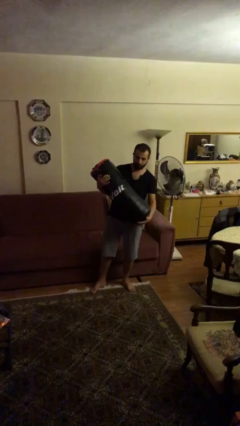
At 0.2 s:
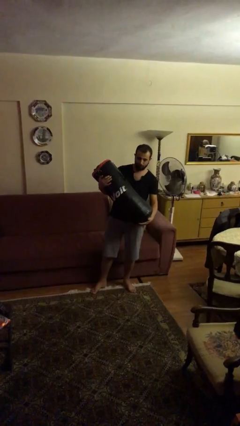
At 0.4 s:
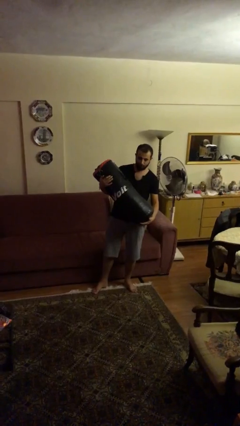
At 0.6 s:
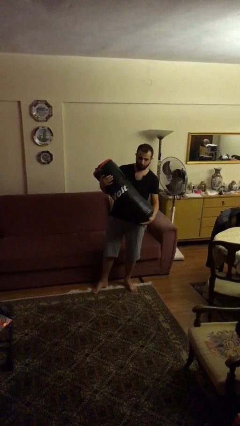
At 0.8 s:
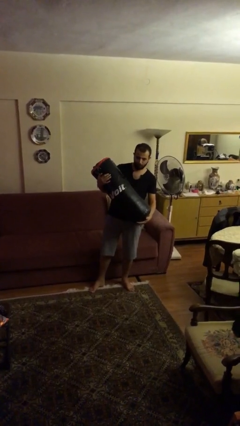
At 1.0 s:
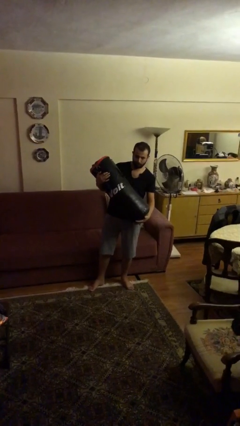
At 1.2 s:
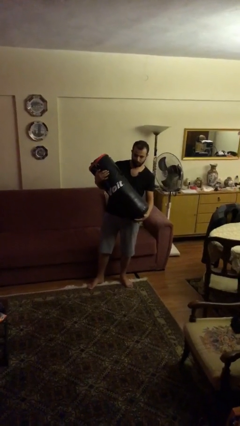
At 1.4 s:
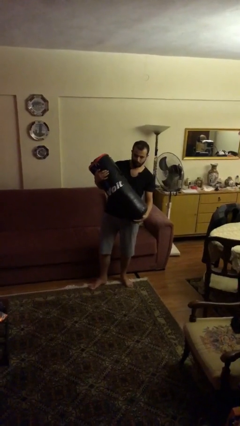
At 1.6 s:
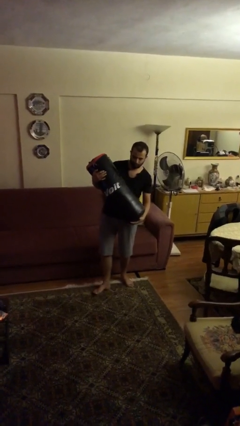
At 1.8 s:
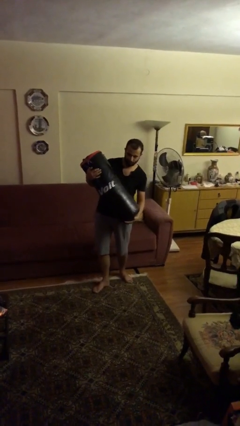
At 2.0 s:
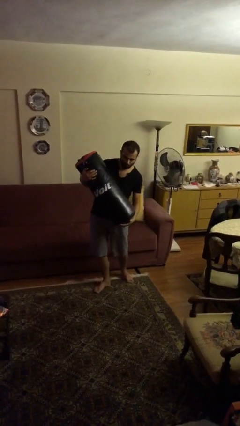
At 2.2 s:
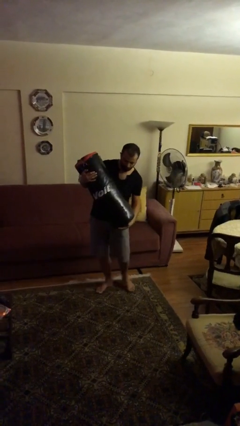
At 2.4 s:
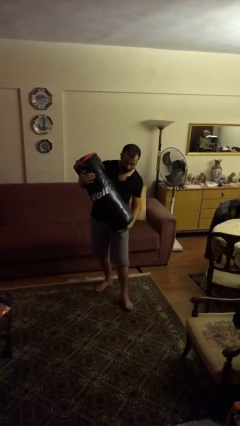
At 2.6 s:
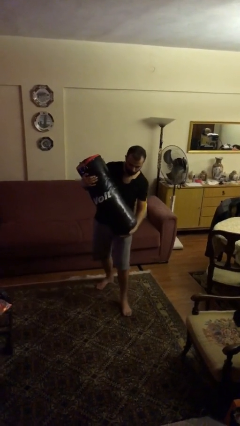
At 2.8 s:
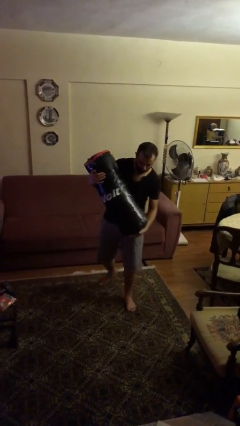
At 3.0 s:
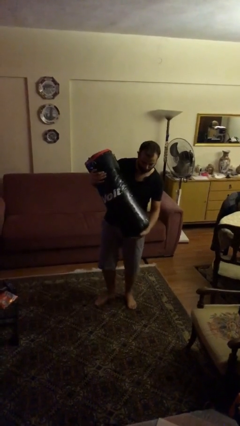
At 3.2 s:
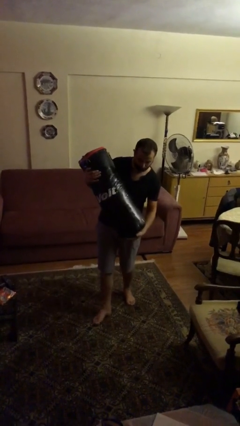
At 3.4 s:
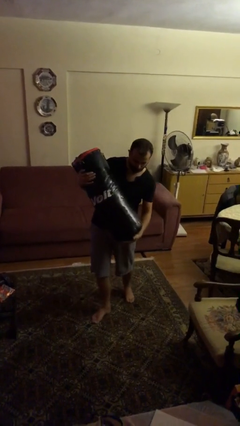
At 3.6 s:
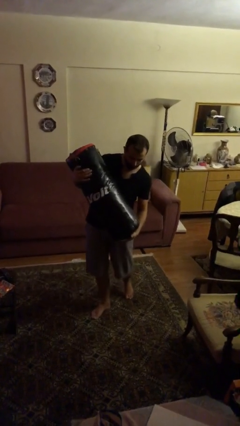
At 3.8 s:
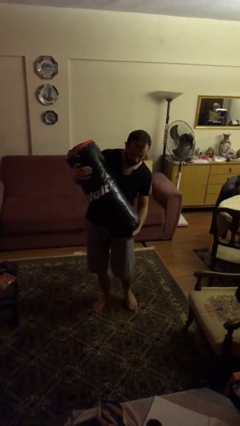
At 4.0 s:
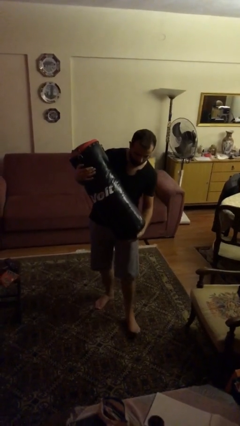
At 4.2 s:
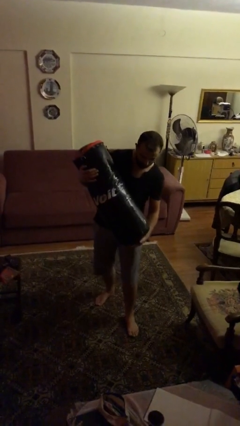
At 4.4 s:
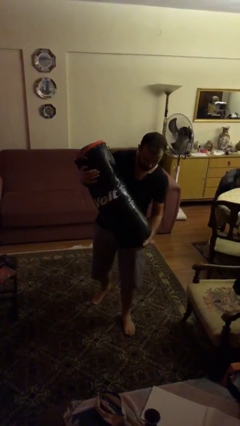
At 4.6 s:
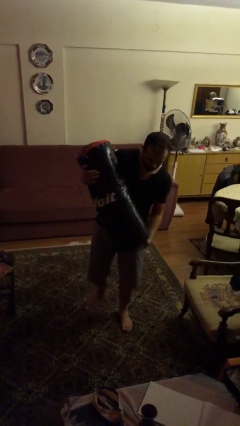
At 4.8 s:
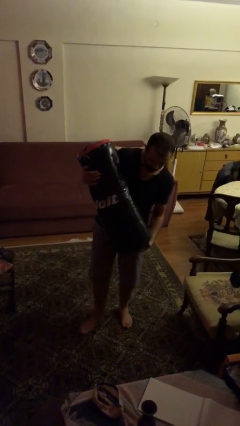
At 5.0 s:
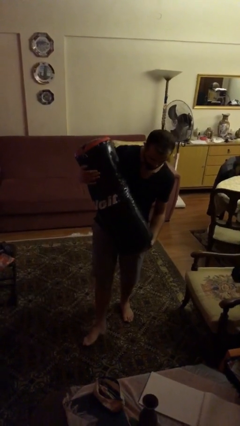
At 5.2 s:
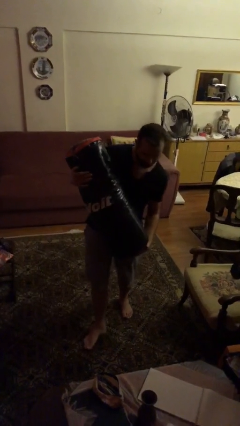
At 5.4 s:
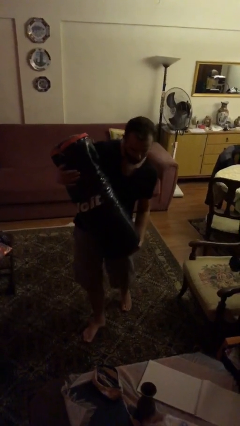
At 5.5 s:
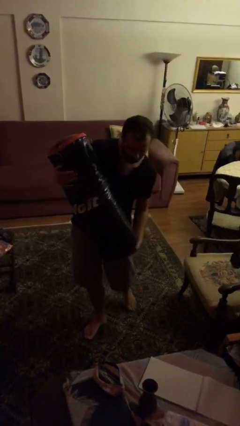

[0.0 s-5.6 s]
person carries heavy object

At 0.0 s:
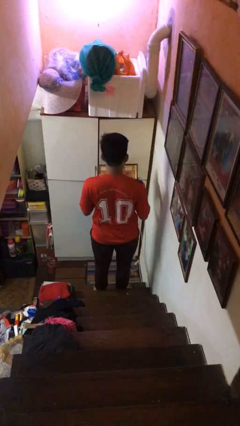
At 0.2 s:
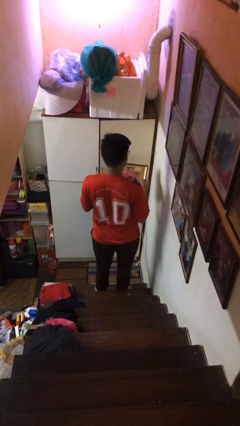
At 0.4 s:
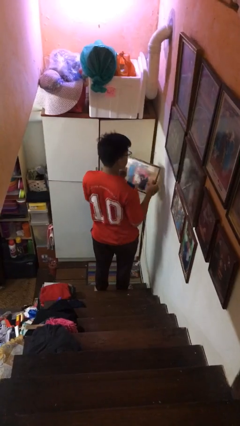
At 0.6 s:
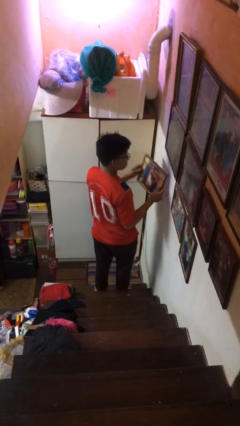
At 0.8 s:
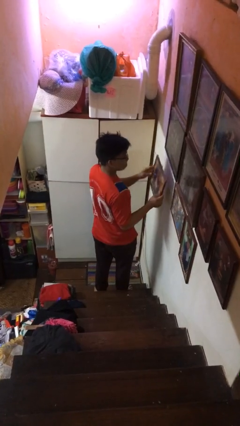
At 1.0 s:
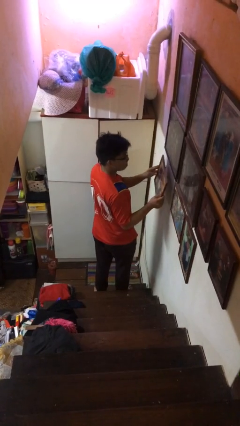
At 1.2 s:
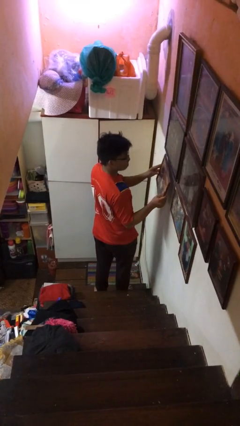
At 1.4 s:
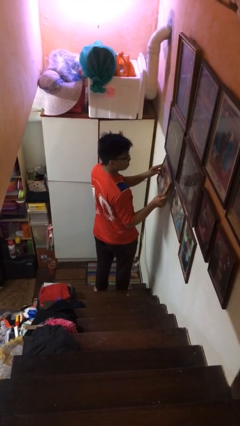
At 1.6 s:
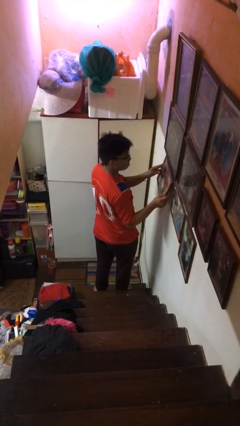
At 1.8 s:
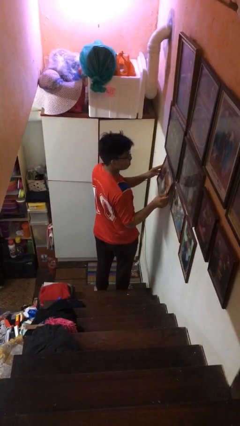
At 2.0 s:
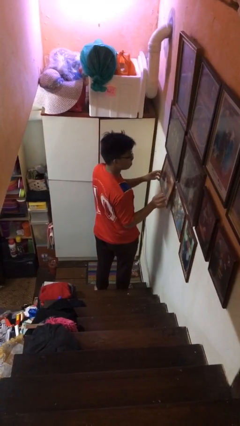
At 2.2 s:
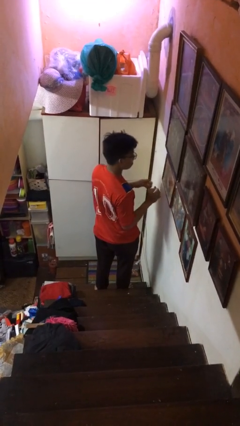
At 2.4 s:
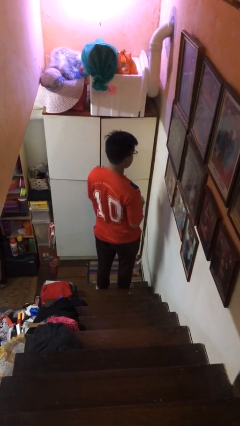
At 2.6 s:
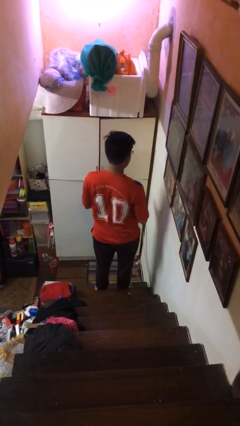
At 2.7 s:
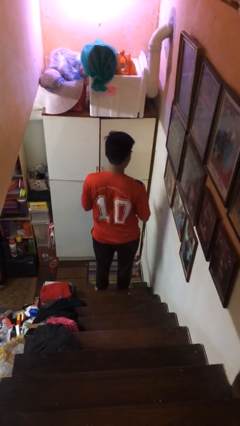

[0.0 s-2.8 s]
person puts up picture frame

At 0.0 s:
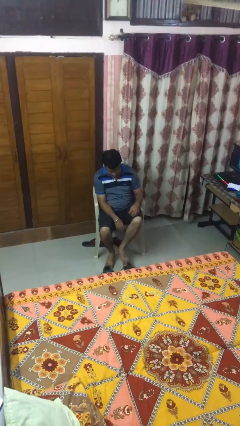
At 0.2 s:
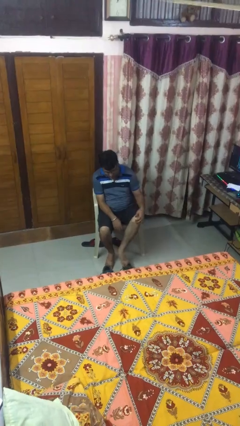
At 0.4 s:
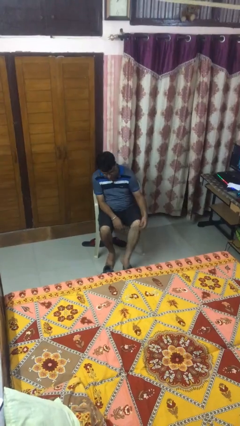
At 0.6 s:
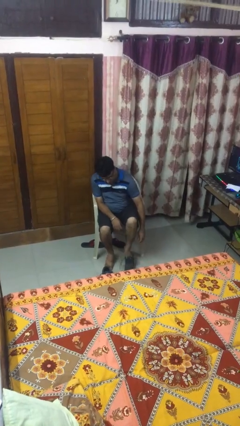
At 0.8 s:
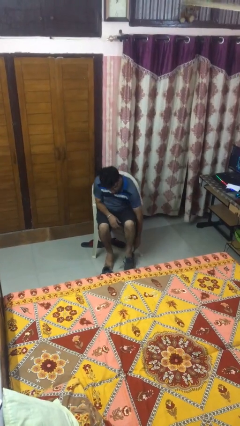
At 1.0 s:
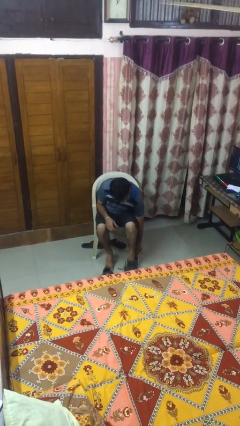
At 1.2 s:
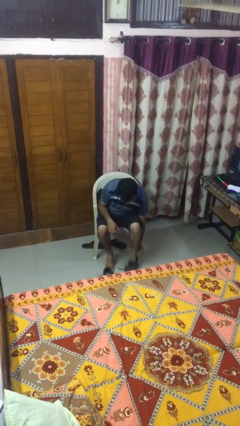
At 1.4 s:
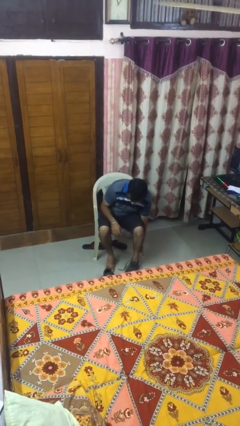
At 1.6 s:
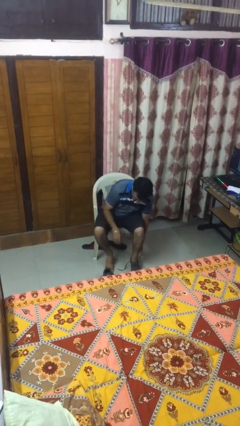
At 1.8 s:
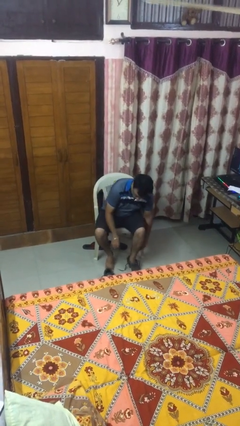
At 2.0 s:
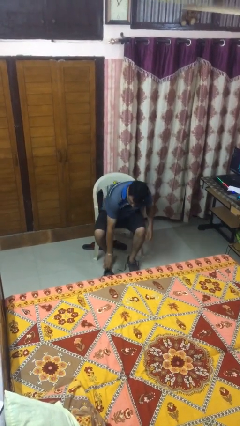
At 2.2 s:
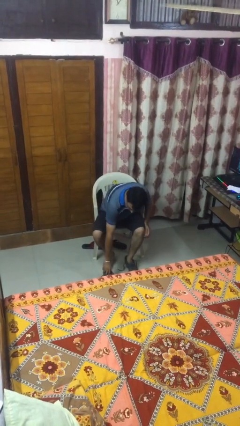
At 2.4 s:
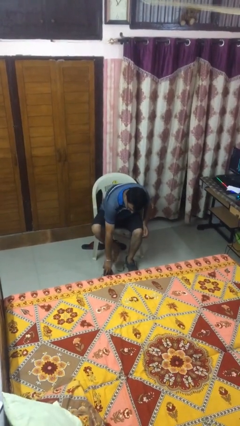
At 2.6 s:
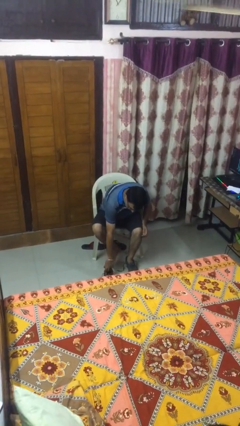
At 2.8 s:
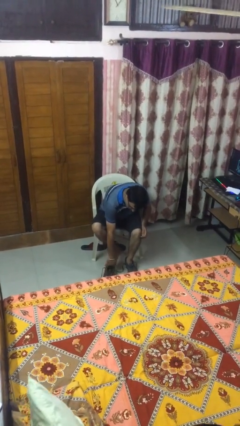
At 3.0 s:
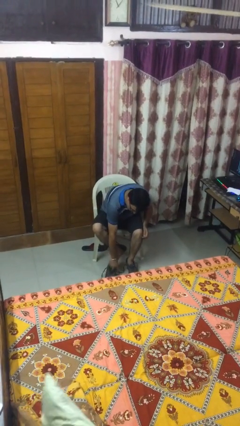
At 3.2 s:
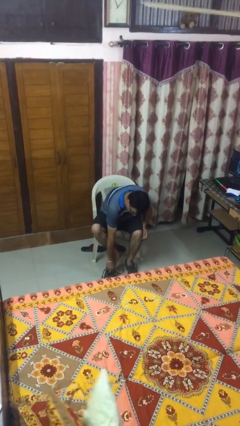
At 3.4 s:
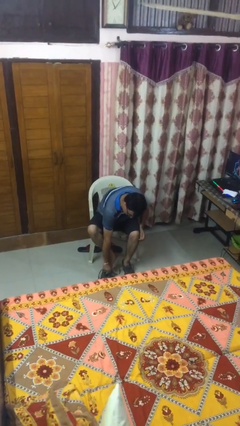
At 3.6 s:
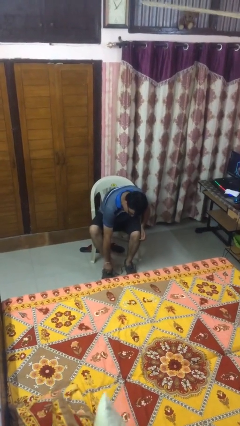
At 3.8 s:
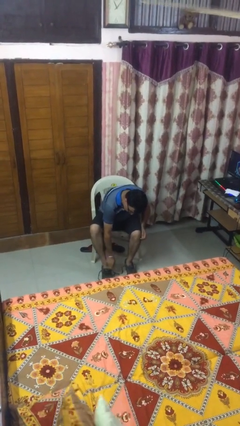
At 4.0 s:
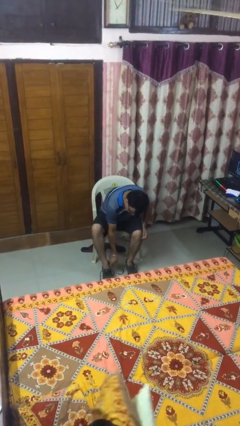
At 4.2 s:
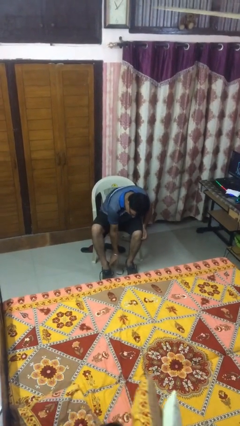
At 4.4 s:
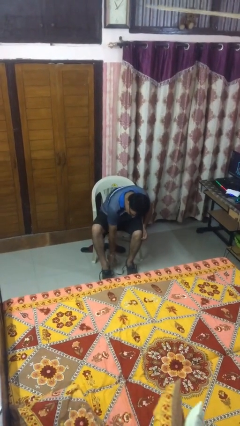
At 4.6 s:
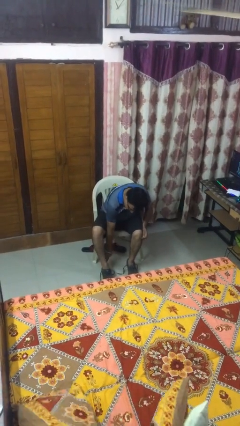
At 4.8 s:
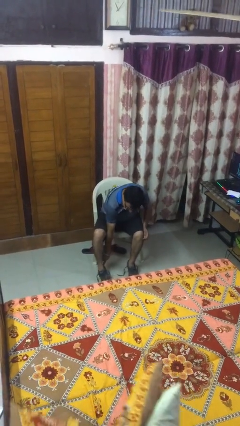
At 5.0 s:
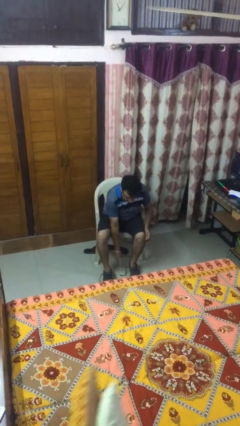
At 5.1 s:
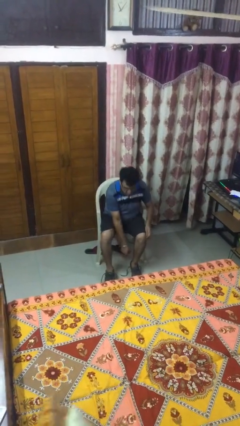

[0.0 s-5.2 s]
person puts on shoes

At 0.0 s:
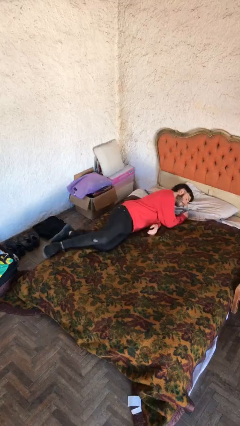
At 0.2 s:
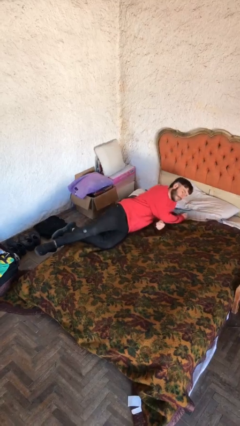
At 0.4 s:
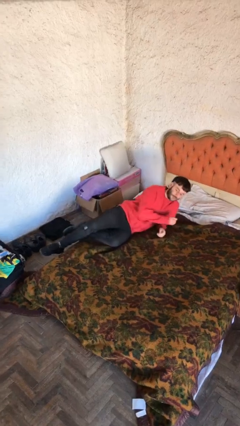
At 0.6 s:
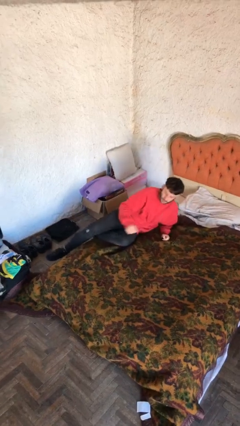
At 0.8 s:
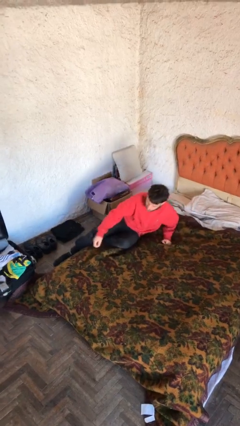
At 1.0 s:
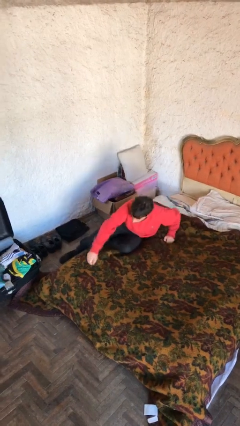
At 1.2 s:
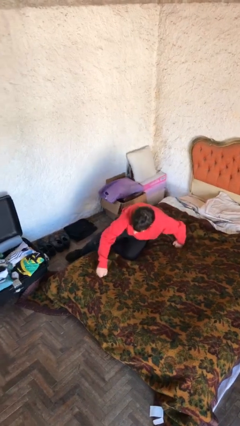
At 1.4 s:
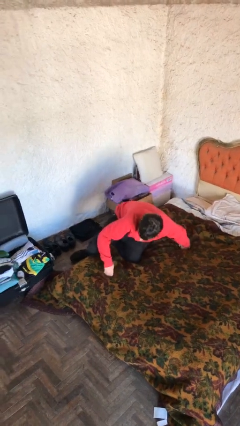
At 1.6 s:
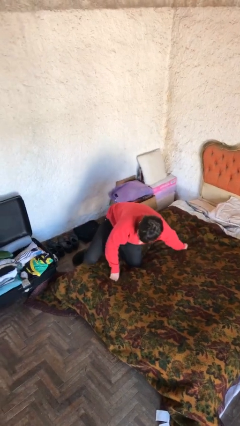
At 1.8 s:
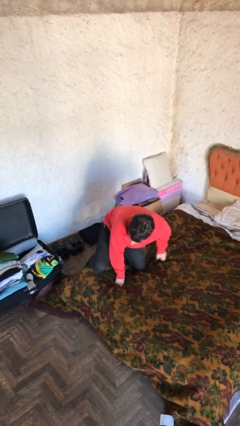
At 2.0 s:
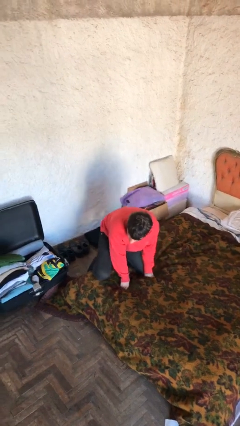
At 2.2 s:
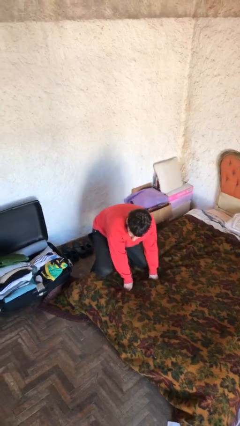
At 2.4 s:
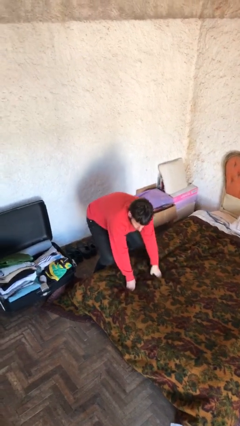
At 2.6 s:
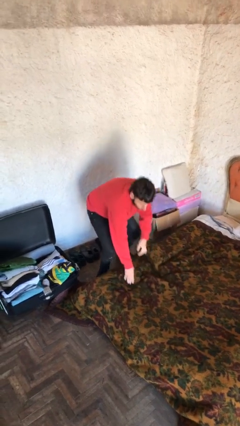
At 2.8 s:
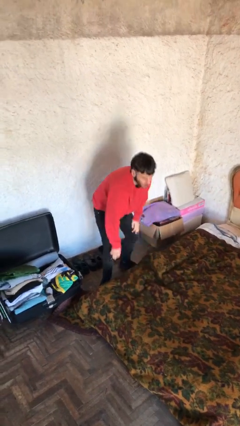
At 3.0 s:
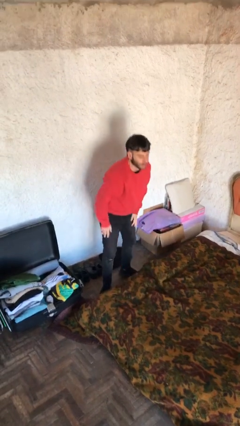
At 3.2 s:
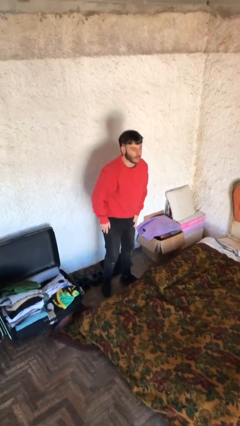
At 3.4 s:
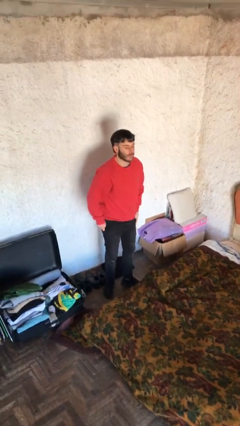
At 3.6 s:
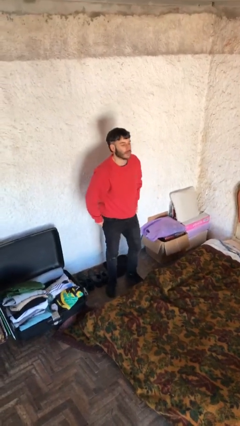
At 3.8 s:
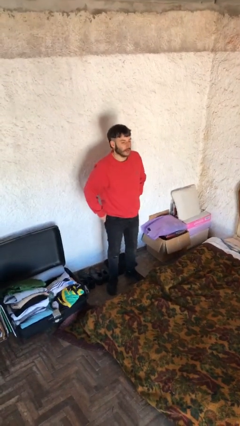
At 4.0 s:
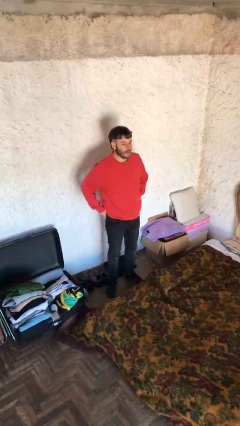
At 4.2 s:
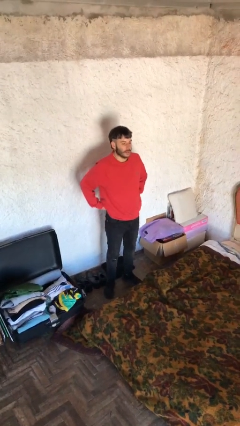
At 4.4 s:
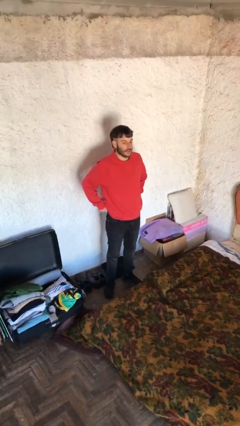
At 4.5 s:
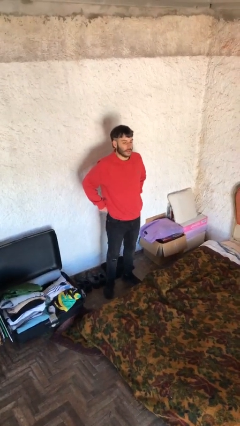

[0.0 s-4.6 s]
person stands up
